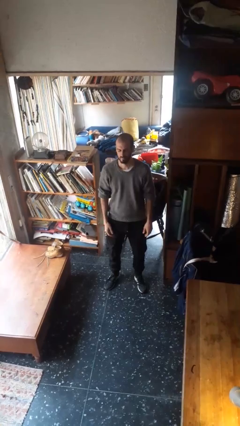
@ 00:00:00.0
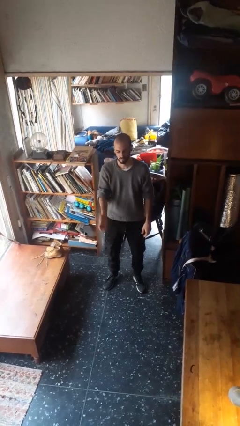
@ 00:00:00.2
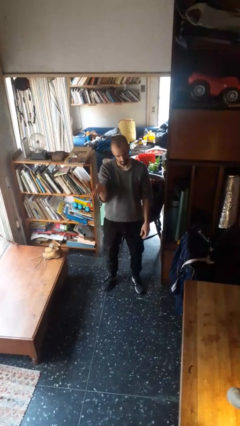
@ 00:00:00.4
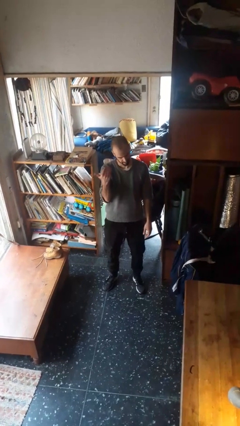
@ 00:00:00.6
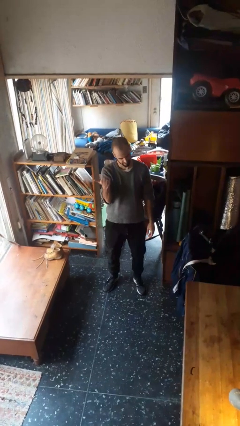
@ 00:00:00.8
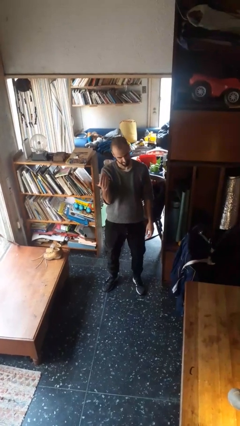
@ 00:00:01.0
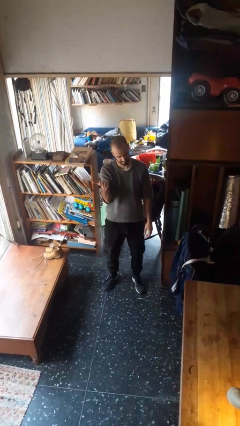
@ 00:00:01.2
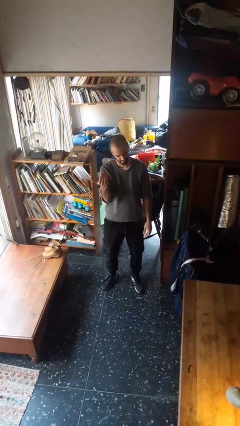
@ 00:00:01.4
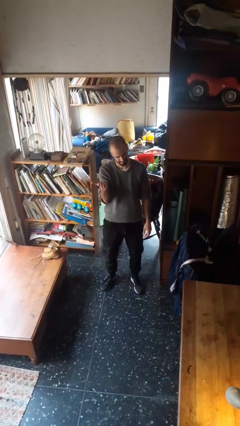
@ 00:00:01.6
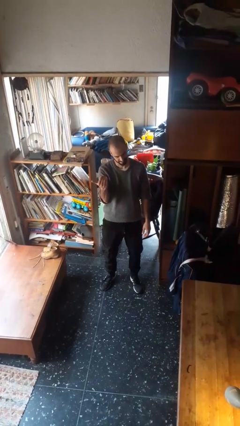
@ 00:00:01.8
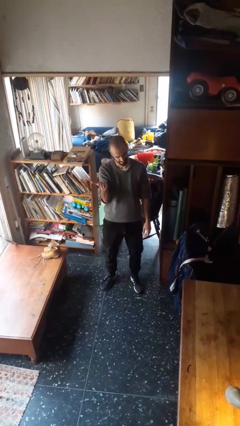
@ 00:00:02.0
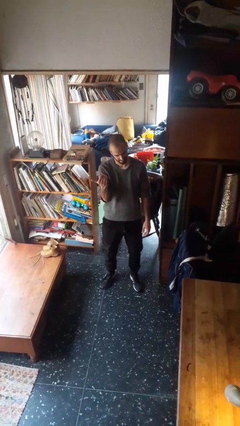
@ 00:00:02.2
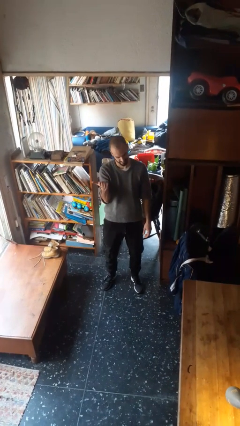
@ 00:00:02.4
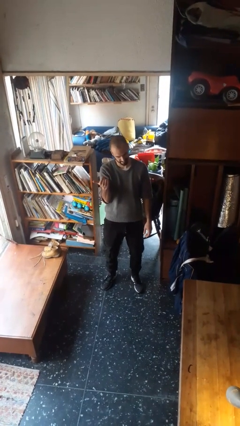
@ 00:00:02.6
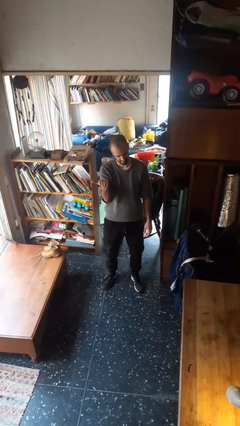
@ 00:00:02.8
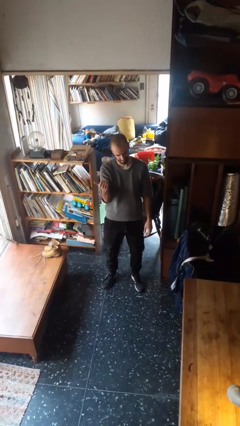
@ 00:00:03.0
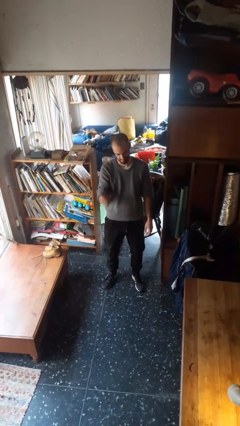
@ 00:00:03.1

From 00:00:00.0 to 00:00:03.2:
person gestures come here

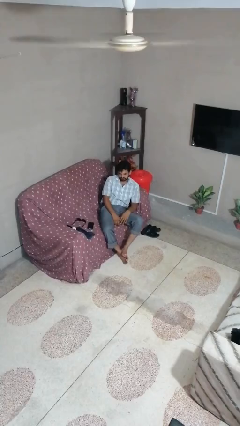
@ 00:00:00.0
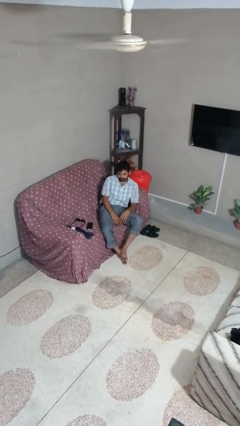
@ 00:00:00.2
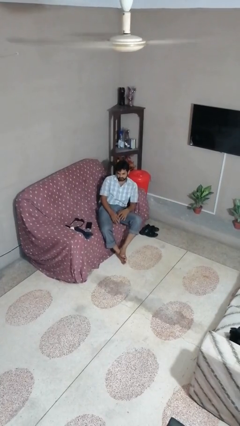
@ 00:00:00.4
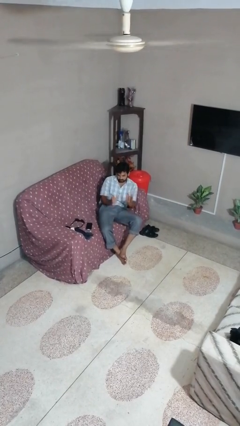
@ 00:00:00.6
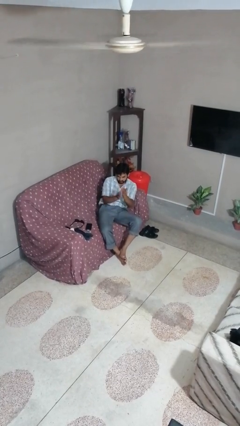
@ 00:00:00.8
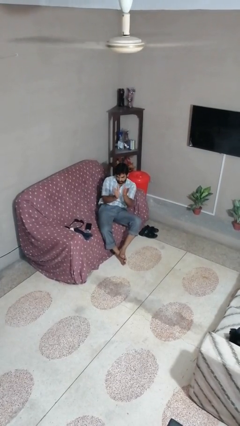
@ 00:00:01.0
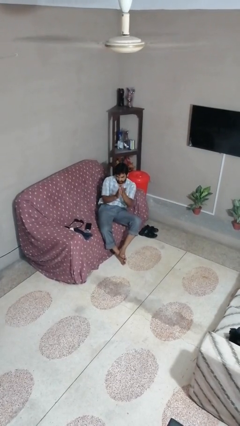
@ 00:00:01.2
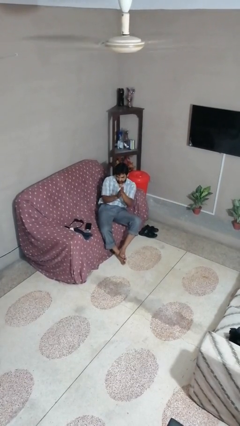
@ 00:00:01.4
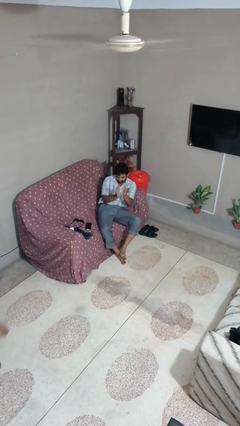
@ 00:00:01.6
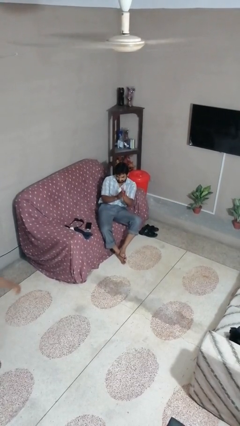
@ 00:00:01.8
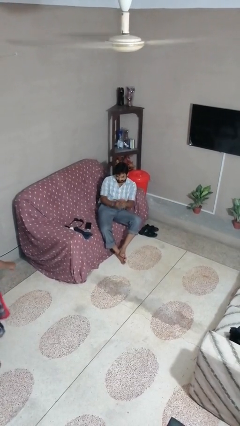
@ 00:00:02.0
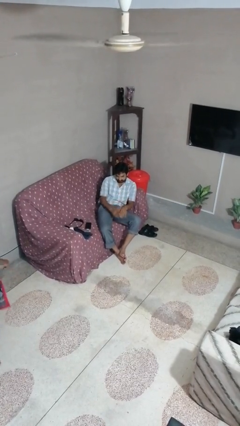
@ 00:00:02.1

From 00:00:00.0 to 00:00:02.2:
person claps hands

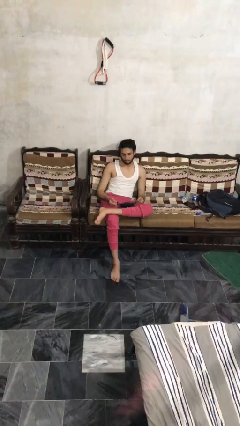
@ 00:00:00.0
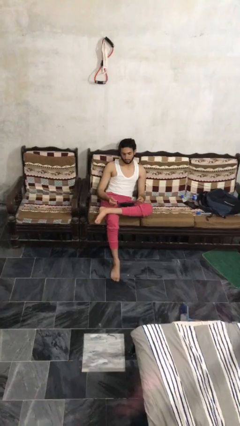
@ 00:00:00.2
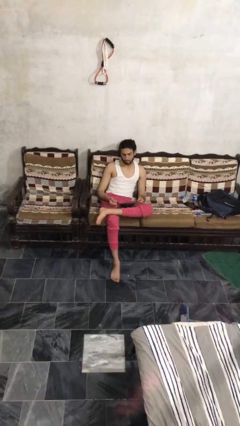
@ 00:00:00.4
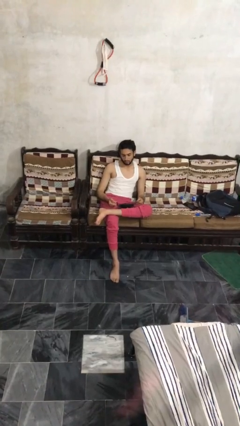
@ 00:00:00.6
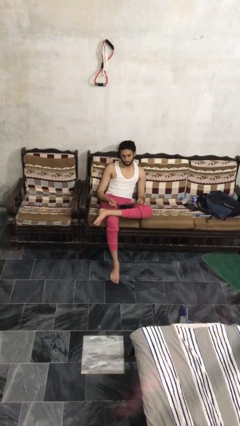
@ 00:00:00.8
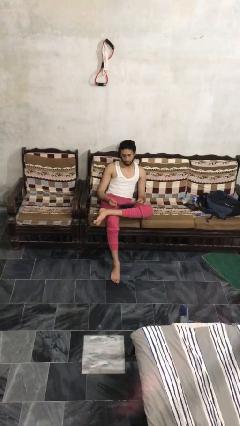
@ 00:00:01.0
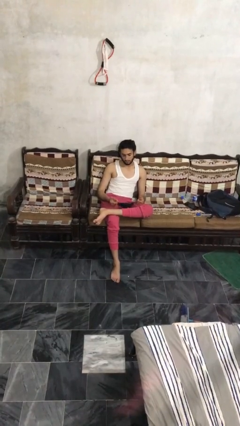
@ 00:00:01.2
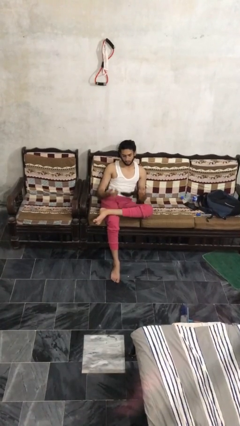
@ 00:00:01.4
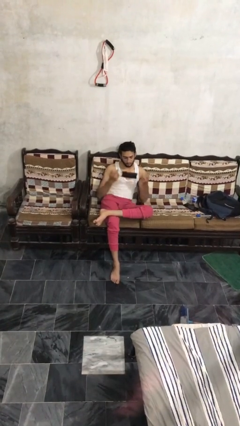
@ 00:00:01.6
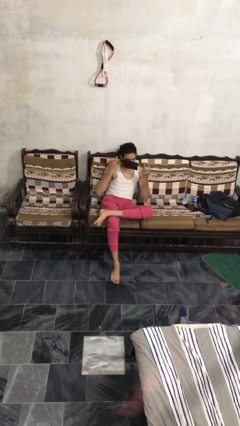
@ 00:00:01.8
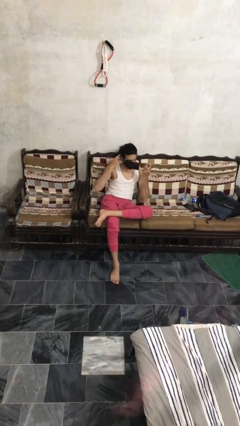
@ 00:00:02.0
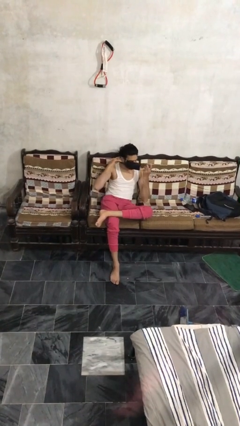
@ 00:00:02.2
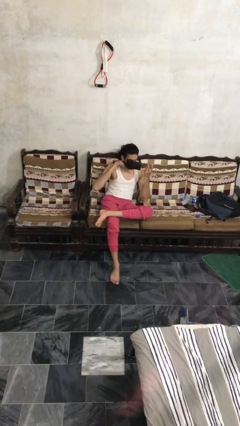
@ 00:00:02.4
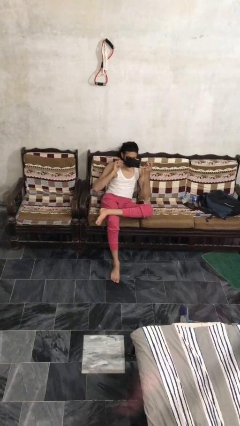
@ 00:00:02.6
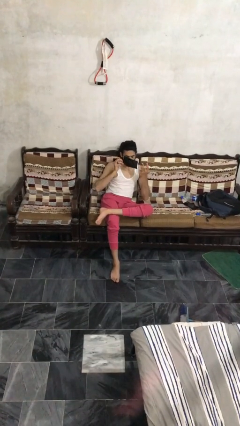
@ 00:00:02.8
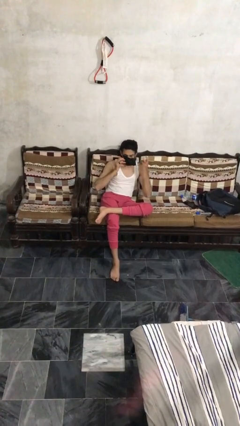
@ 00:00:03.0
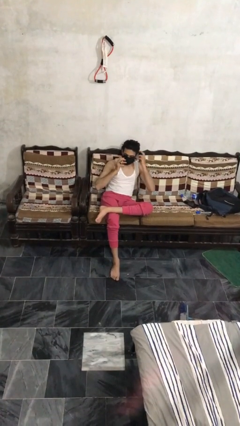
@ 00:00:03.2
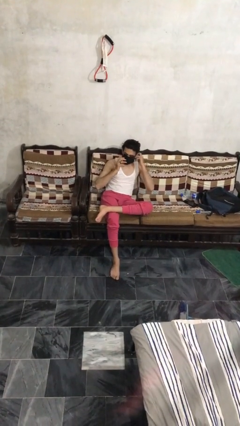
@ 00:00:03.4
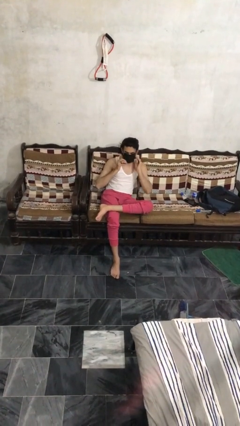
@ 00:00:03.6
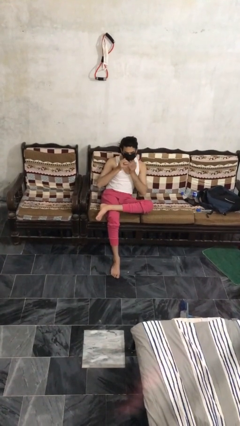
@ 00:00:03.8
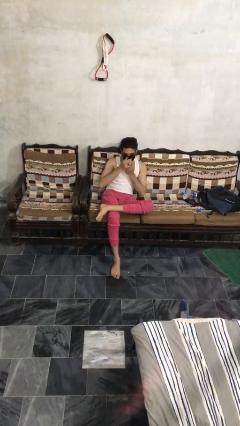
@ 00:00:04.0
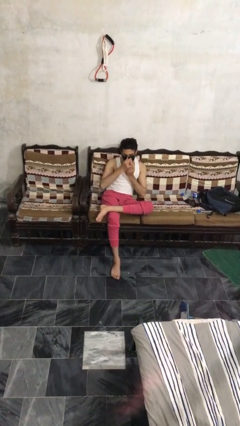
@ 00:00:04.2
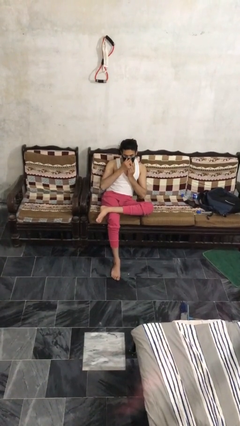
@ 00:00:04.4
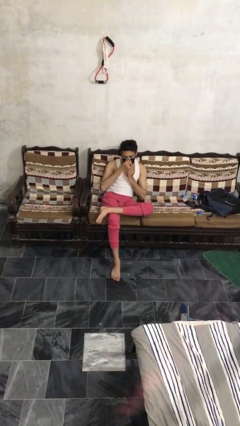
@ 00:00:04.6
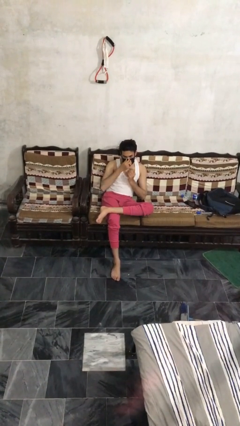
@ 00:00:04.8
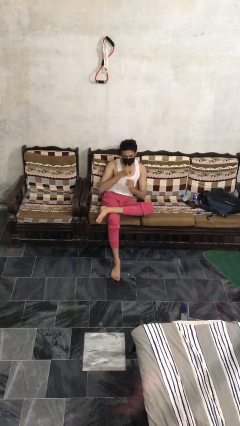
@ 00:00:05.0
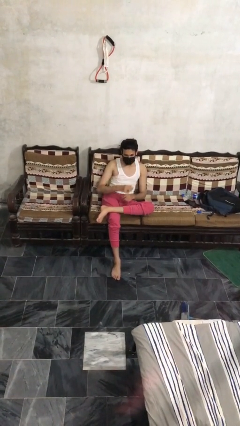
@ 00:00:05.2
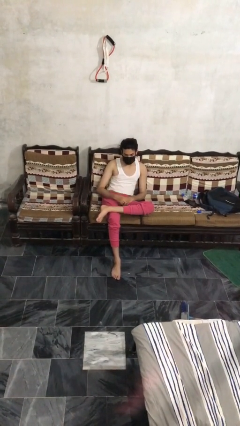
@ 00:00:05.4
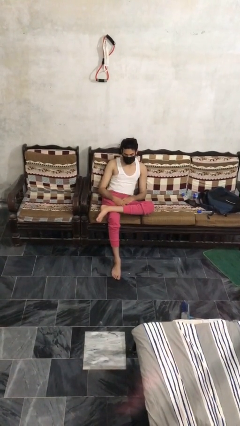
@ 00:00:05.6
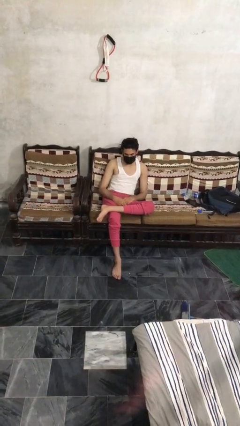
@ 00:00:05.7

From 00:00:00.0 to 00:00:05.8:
person puts on facemask

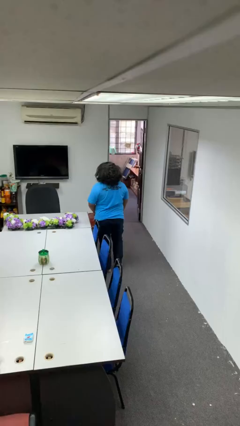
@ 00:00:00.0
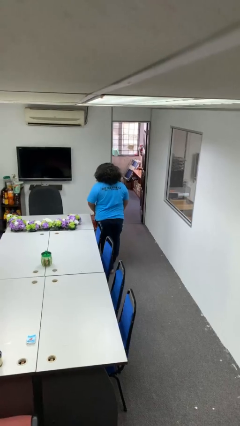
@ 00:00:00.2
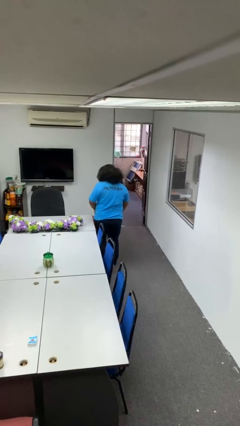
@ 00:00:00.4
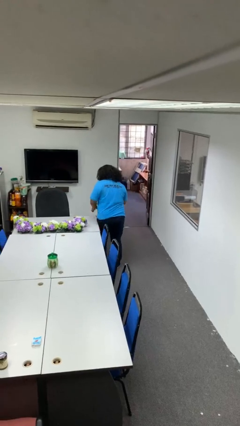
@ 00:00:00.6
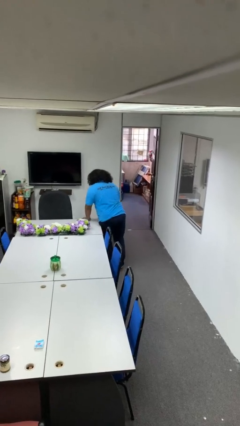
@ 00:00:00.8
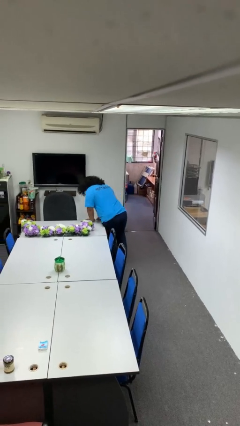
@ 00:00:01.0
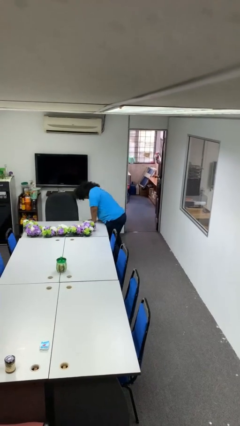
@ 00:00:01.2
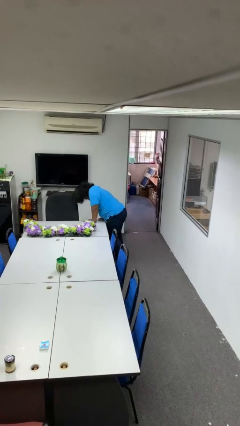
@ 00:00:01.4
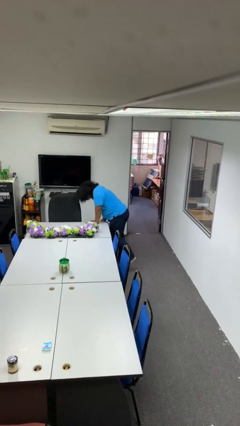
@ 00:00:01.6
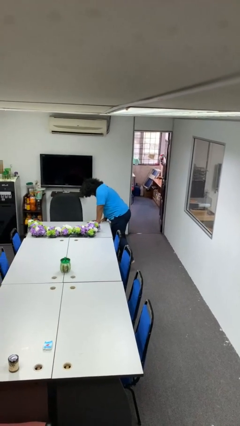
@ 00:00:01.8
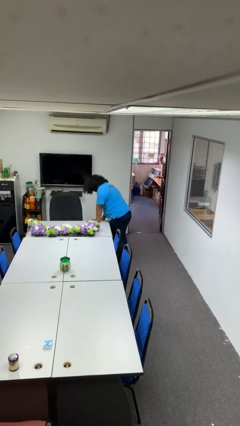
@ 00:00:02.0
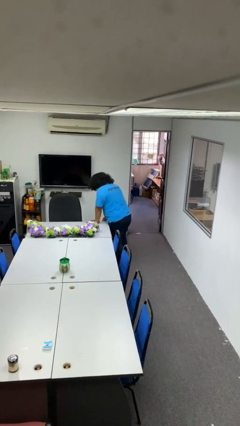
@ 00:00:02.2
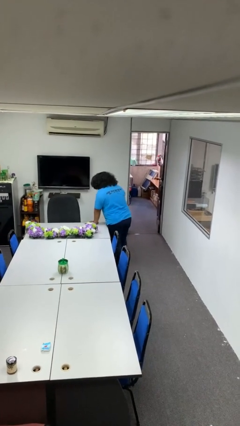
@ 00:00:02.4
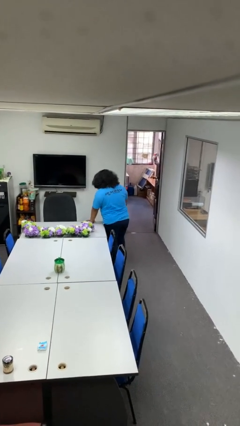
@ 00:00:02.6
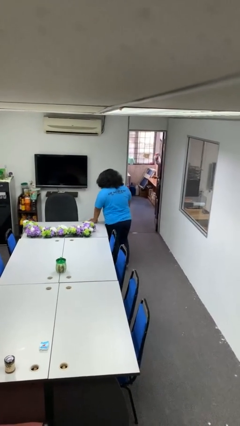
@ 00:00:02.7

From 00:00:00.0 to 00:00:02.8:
person bumps into table

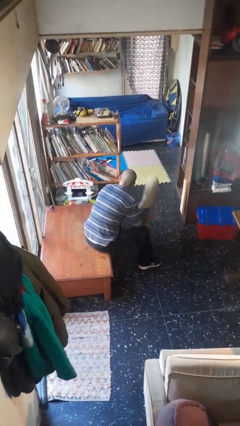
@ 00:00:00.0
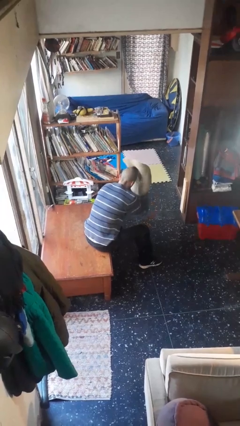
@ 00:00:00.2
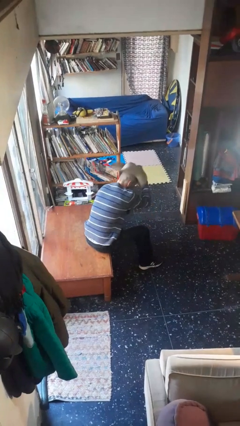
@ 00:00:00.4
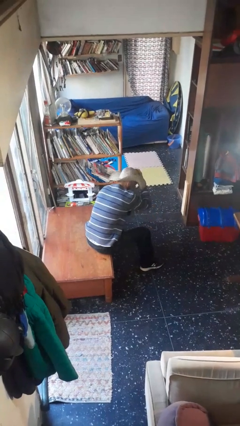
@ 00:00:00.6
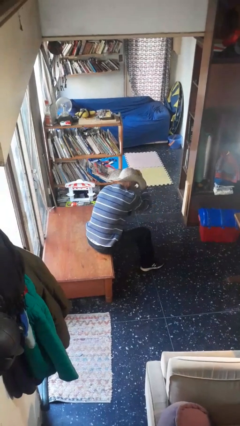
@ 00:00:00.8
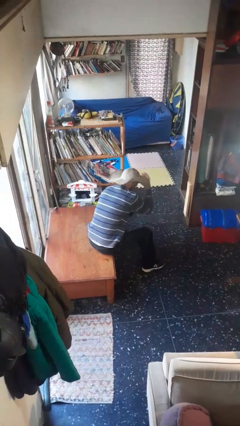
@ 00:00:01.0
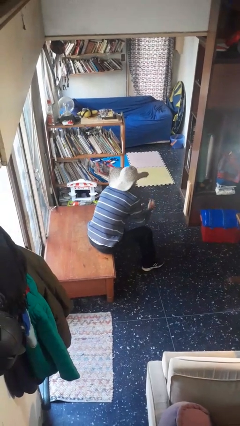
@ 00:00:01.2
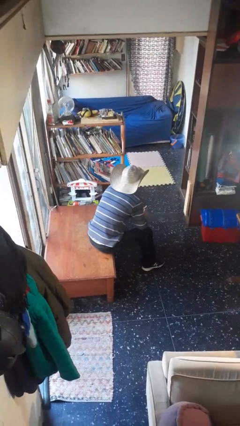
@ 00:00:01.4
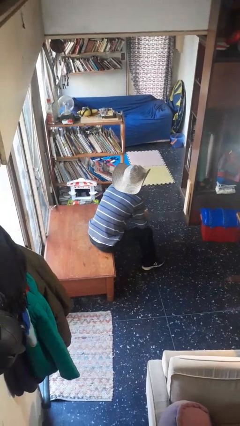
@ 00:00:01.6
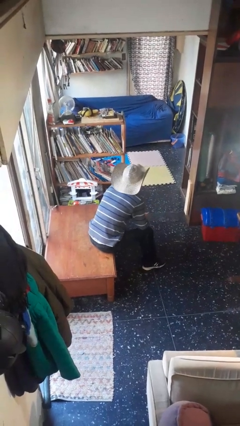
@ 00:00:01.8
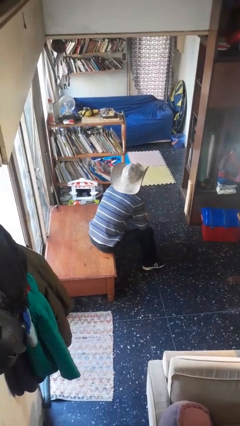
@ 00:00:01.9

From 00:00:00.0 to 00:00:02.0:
person puts on hat

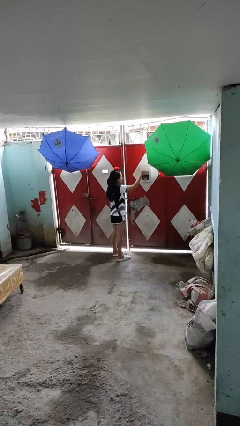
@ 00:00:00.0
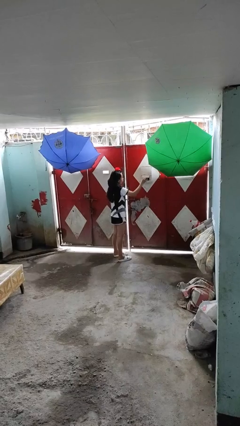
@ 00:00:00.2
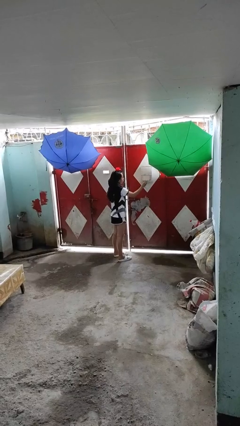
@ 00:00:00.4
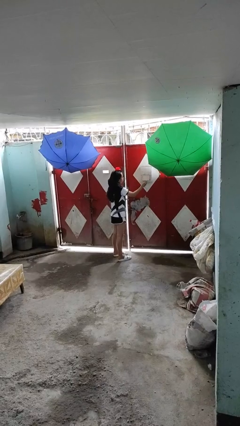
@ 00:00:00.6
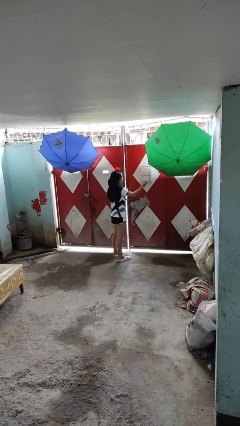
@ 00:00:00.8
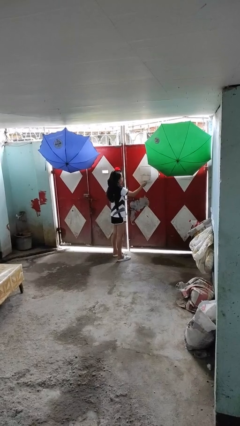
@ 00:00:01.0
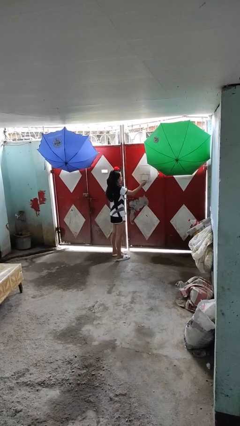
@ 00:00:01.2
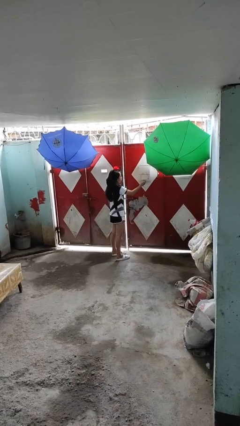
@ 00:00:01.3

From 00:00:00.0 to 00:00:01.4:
person closes mailbox
